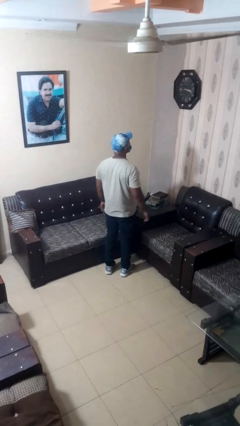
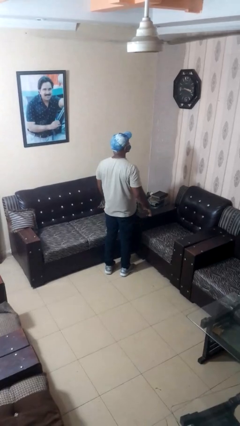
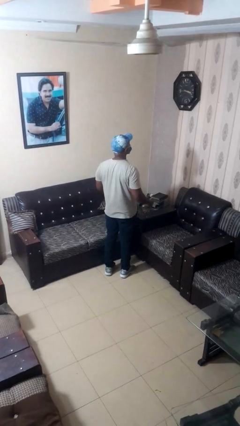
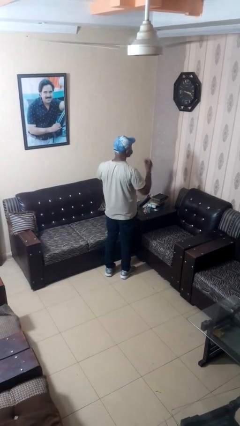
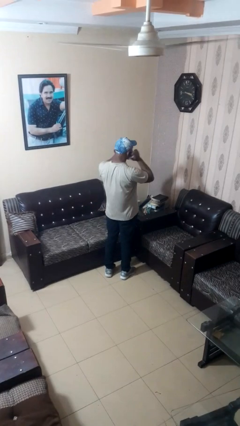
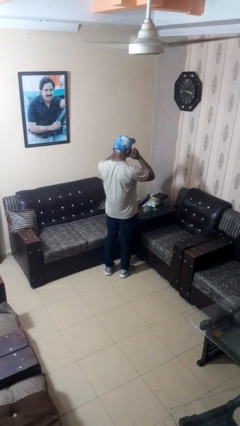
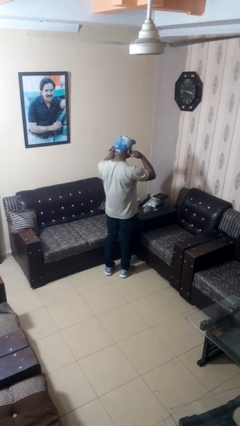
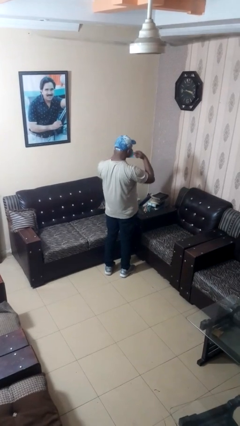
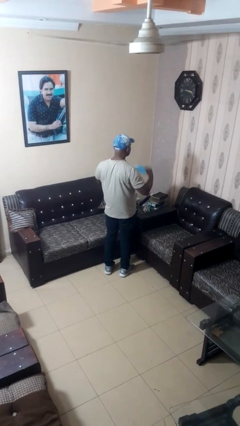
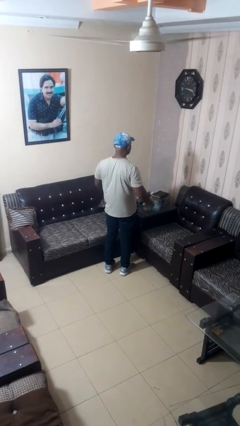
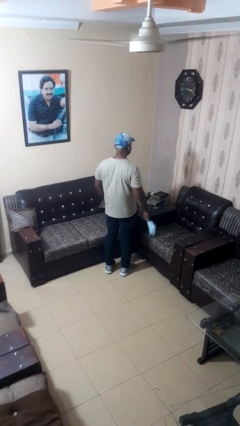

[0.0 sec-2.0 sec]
person takes off facemask

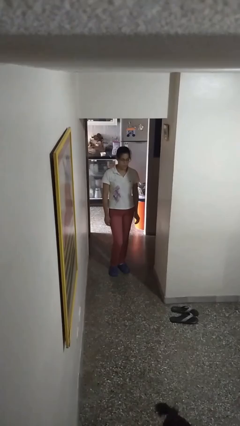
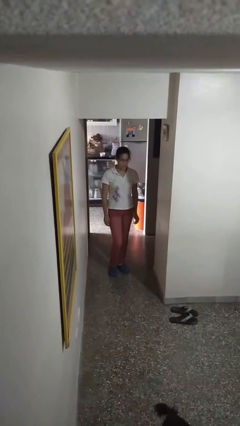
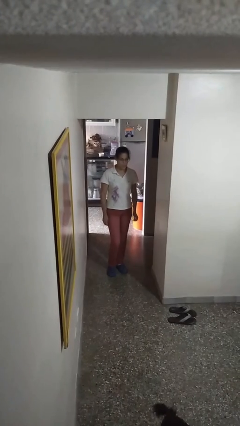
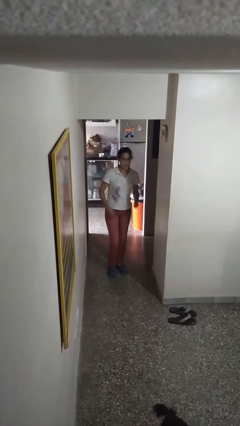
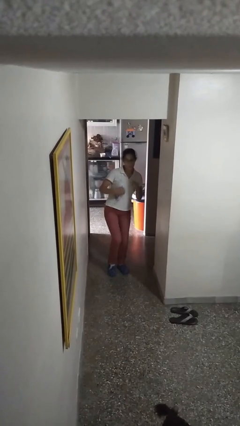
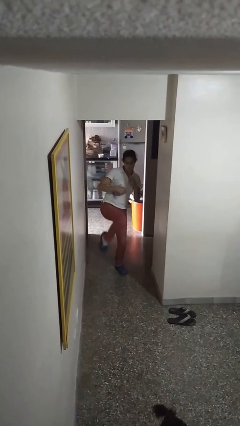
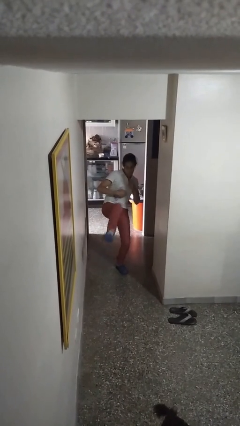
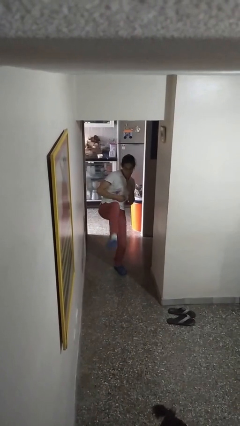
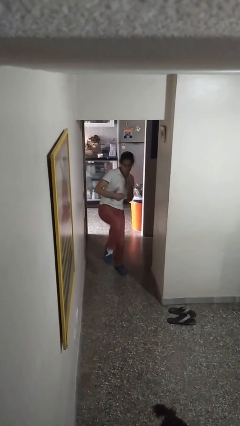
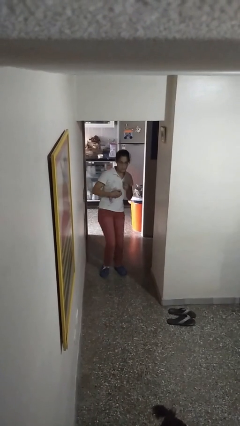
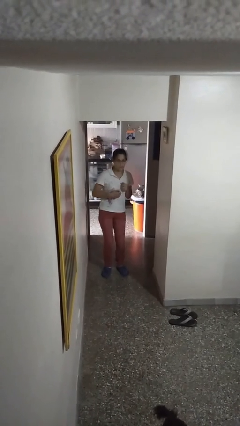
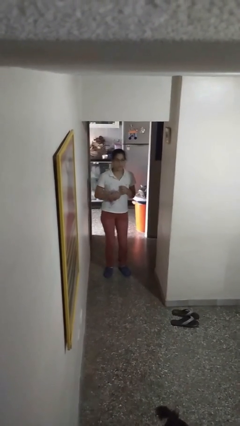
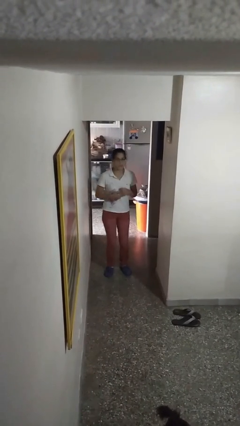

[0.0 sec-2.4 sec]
person karate kicks

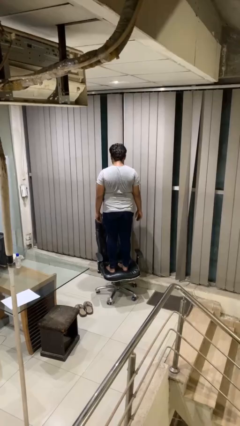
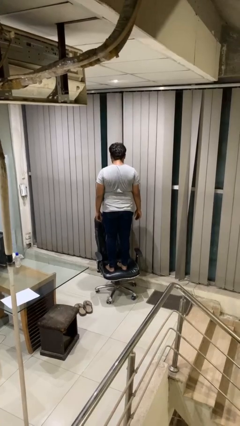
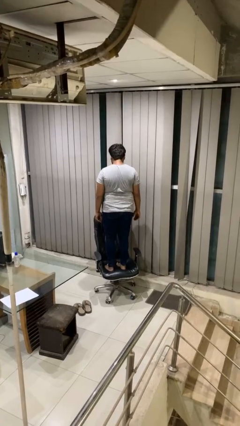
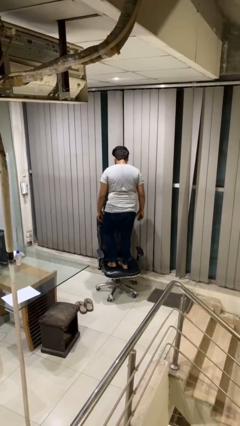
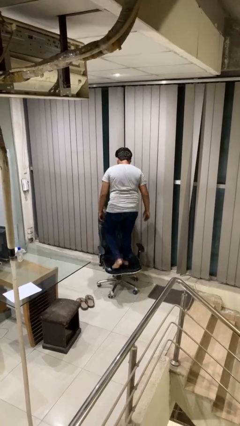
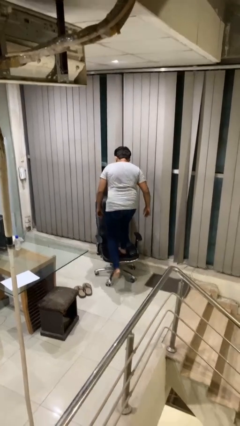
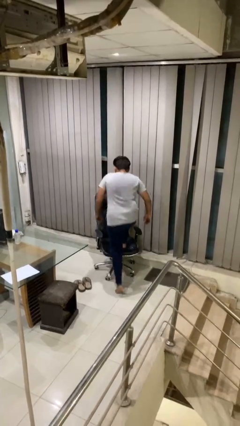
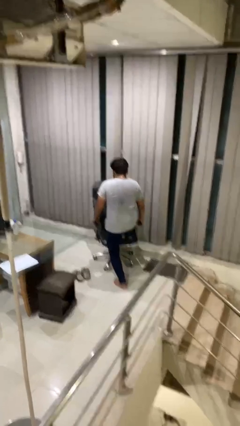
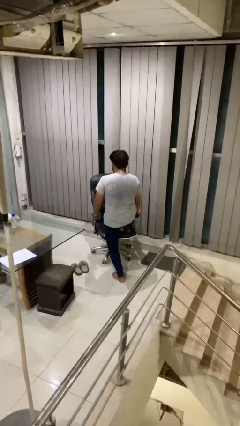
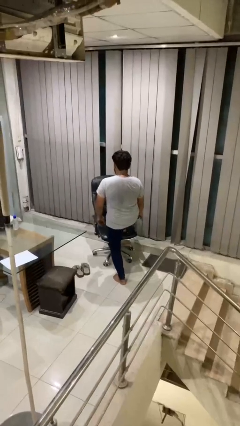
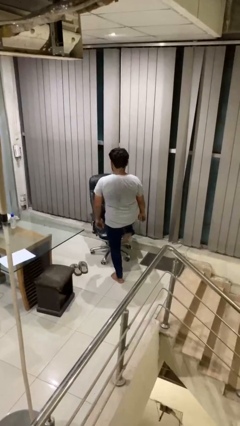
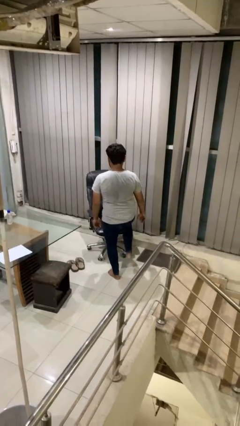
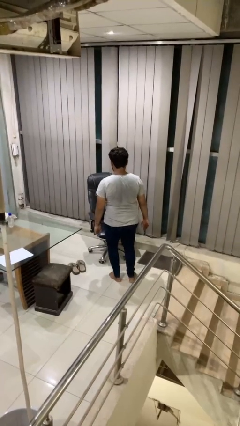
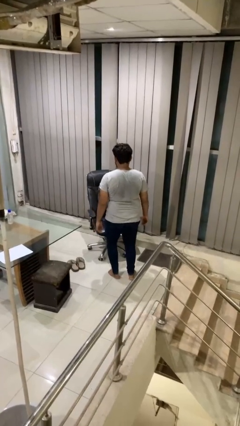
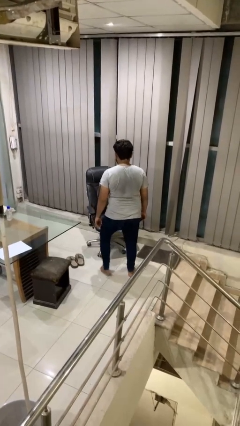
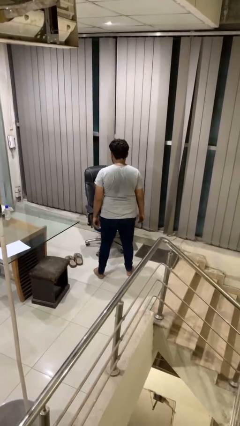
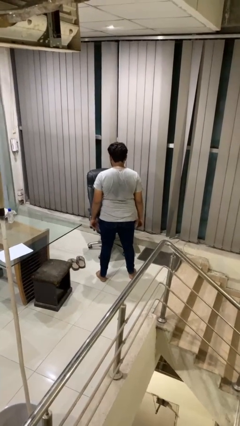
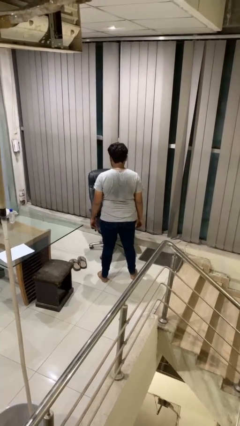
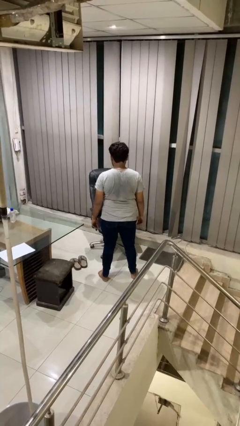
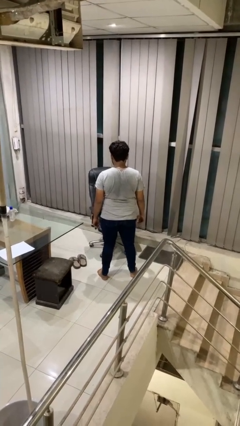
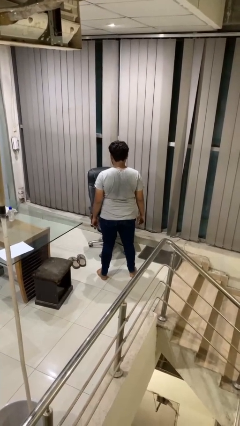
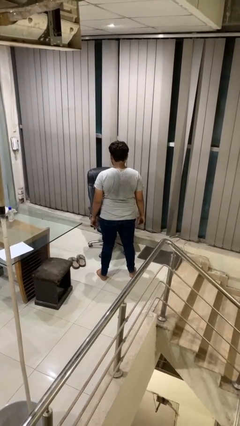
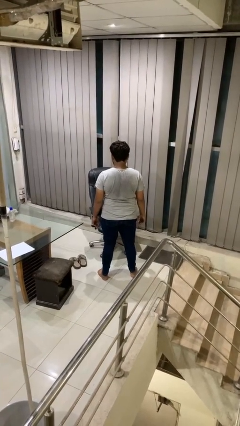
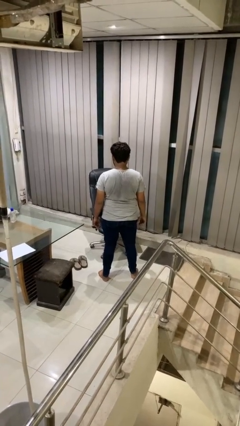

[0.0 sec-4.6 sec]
person climbs off chair

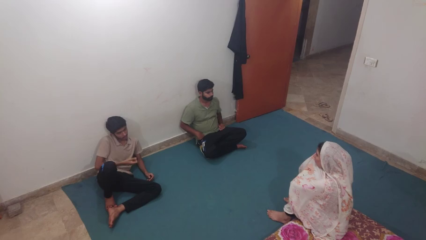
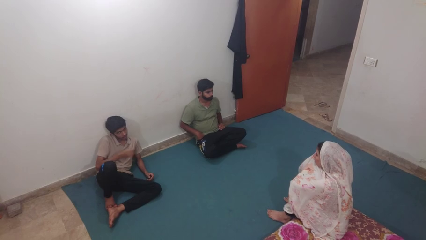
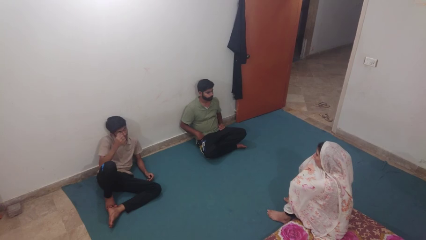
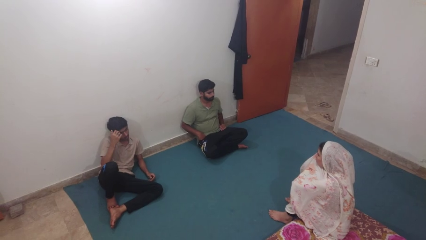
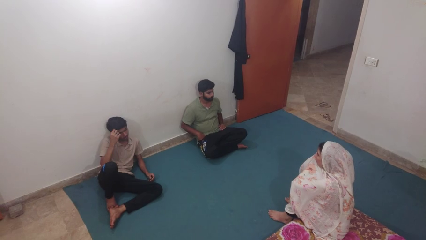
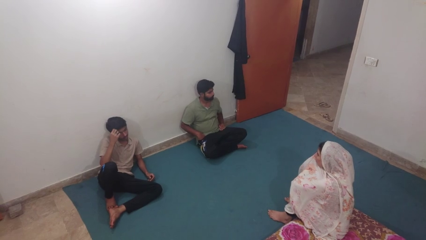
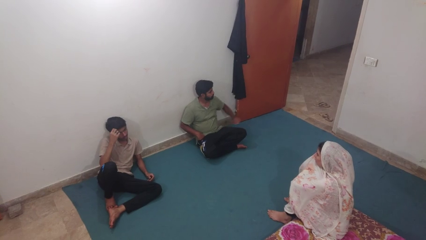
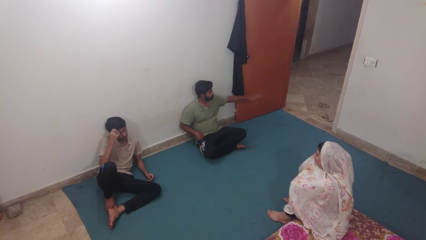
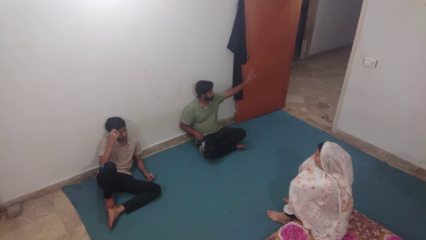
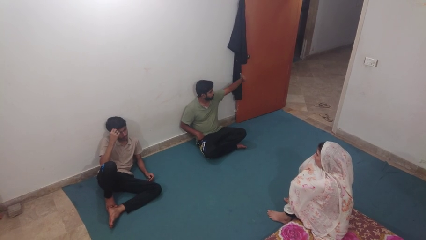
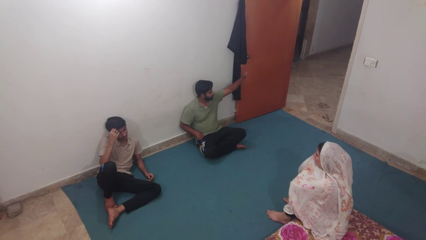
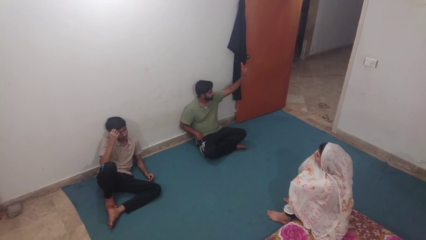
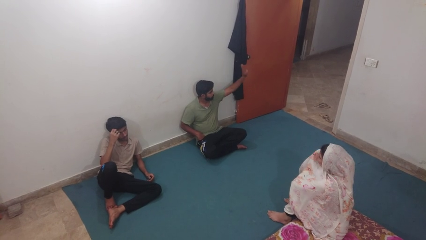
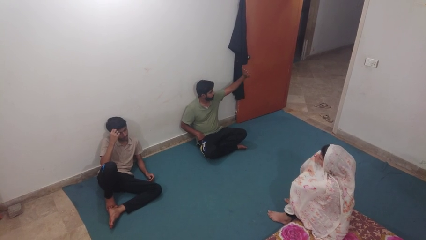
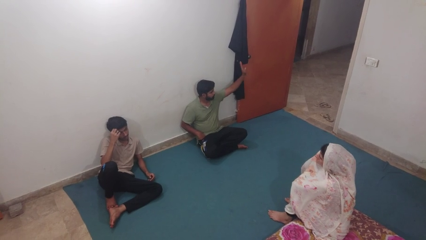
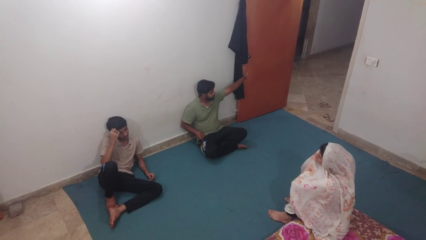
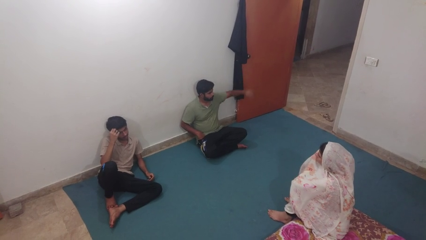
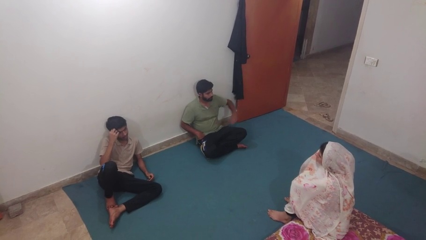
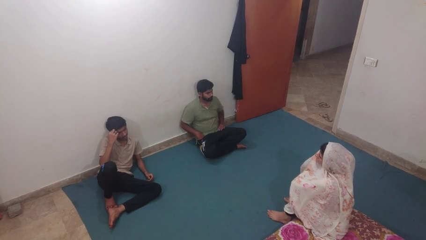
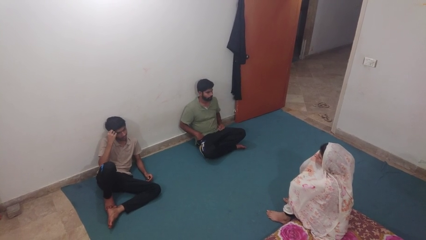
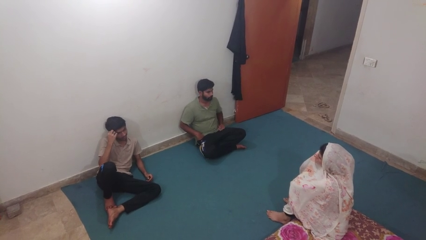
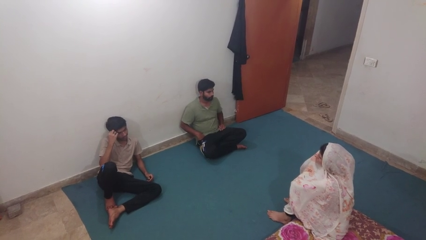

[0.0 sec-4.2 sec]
person waves at person

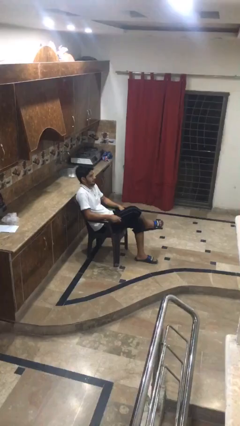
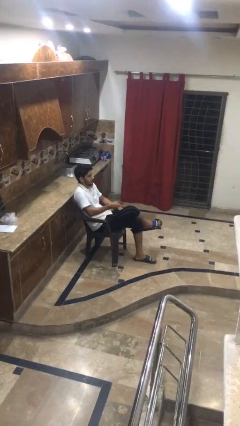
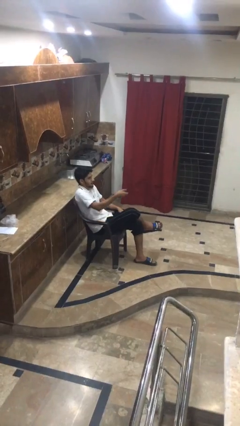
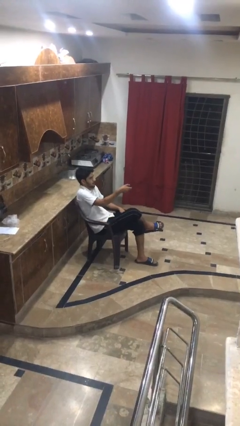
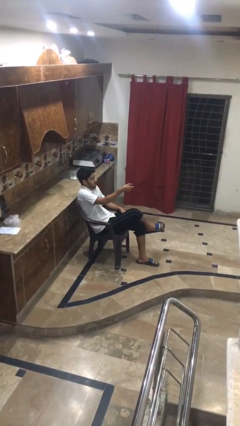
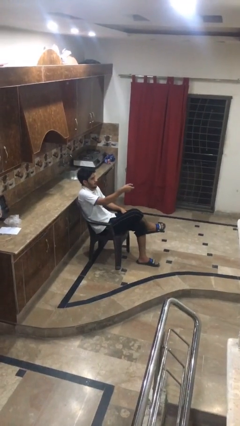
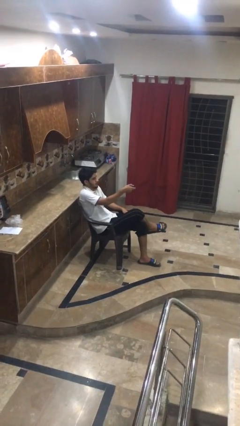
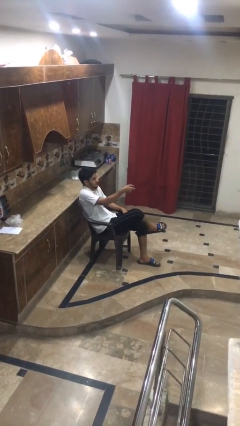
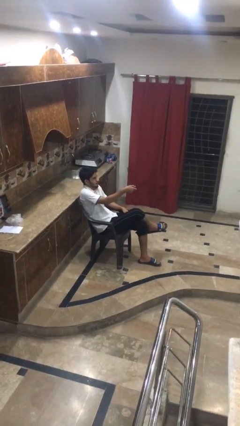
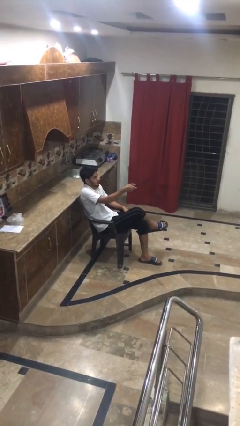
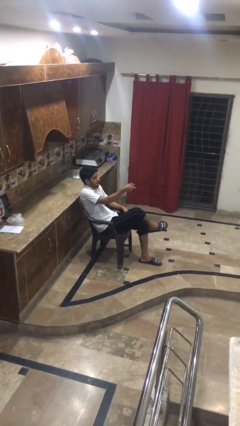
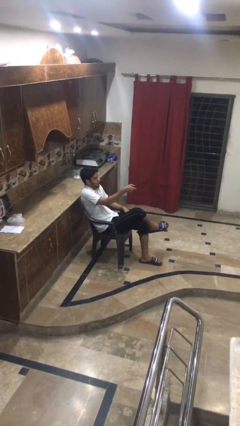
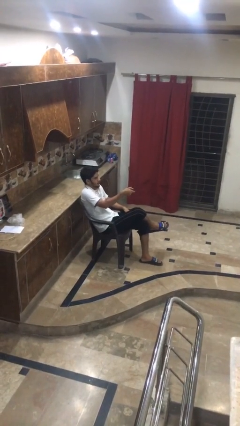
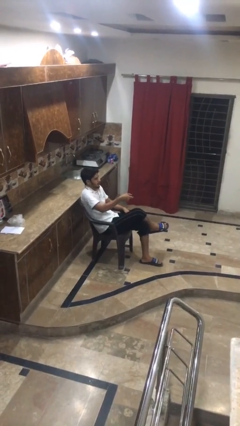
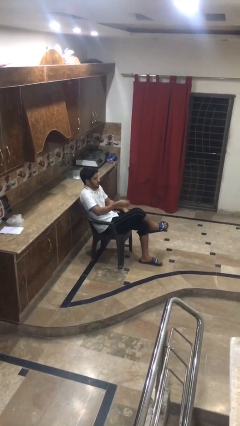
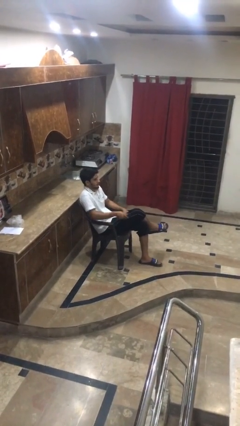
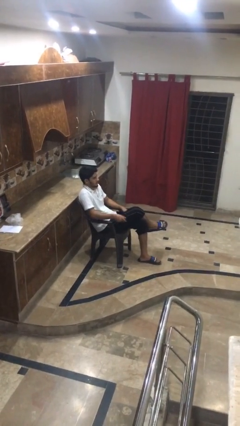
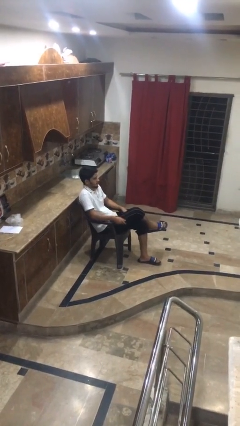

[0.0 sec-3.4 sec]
person uses television remote

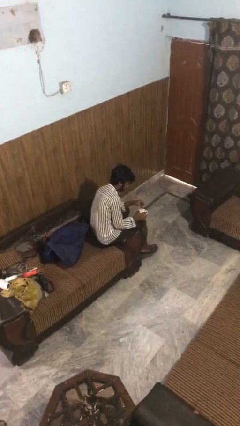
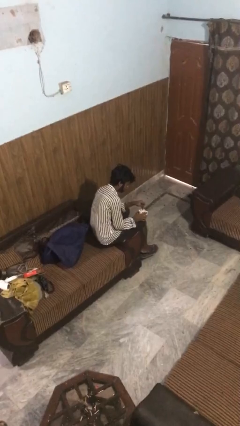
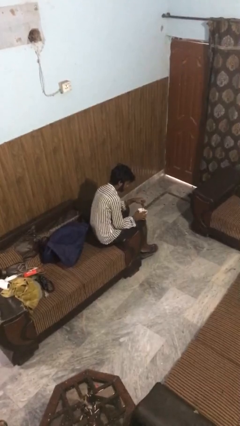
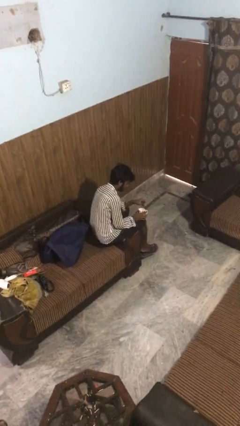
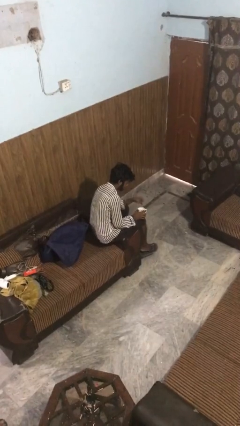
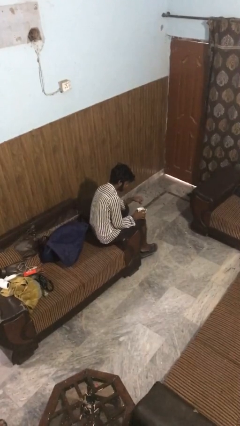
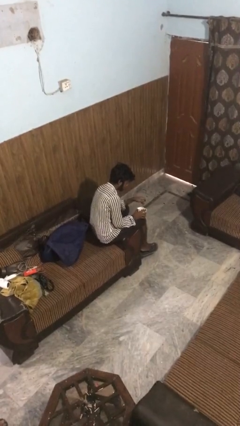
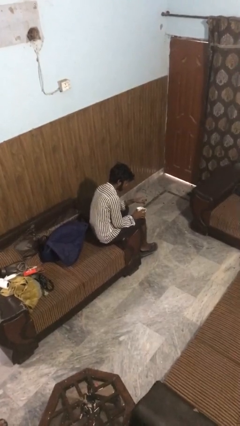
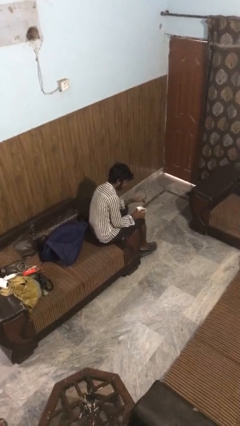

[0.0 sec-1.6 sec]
person stirs mug
